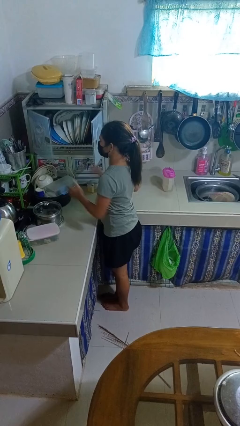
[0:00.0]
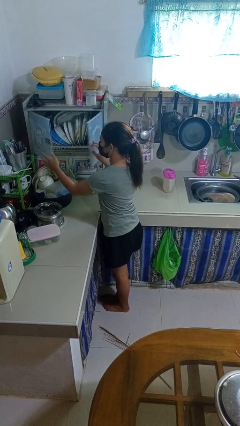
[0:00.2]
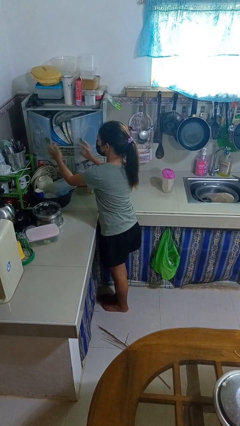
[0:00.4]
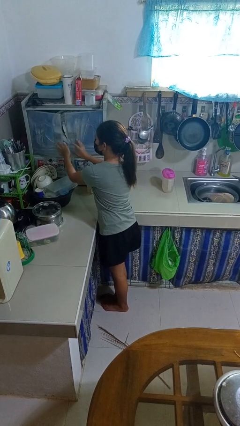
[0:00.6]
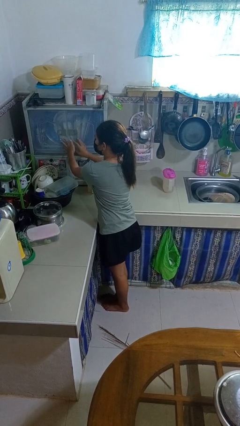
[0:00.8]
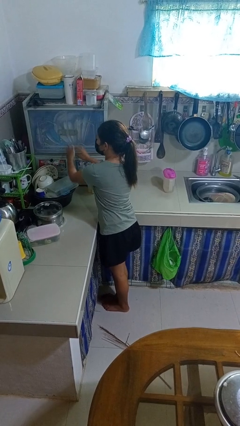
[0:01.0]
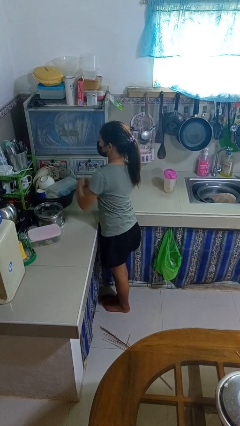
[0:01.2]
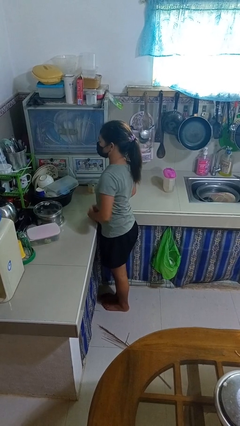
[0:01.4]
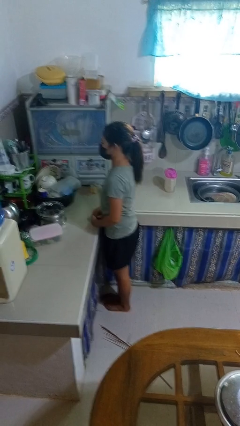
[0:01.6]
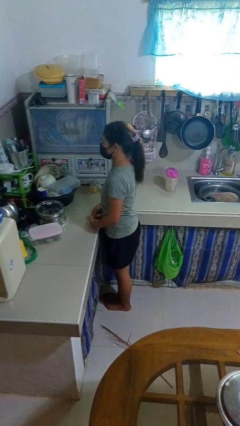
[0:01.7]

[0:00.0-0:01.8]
person closes kitchen drawer

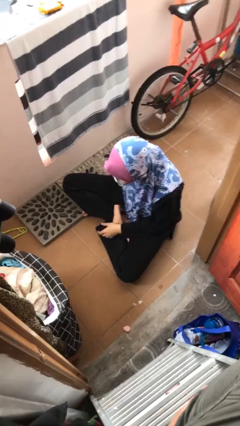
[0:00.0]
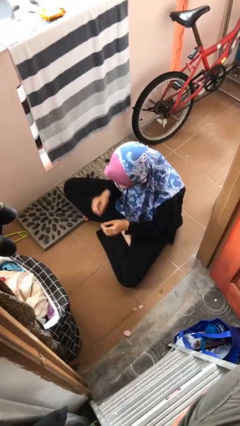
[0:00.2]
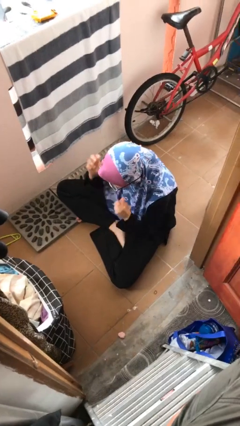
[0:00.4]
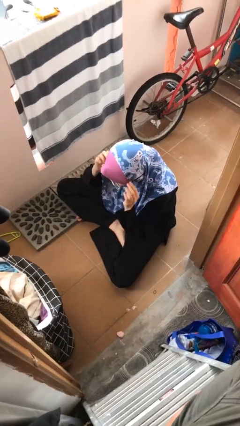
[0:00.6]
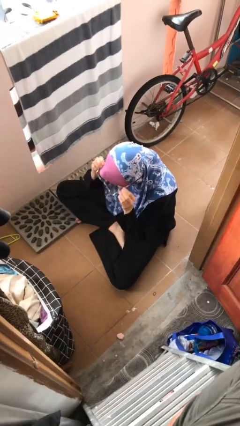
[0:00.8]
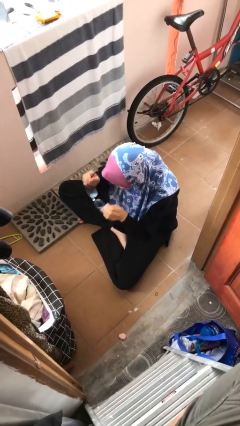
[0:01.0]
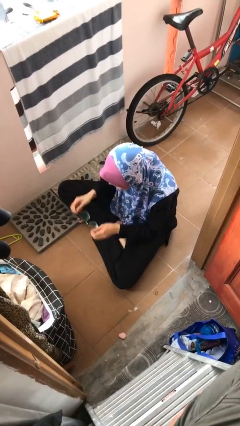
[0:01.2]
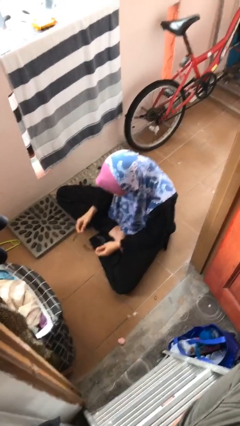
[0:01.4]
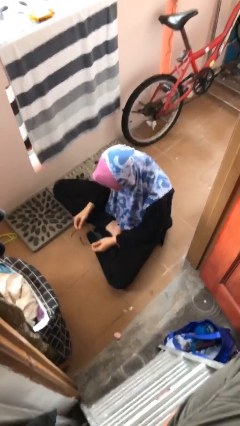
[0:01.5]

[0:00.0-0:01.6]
person takes off glasses

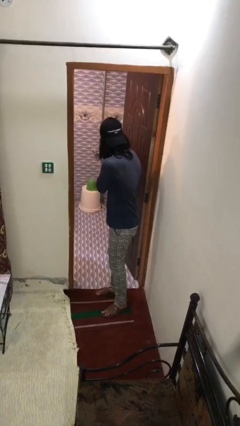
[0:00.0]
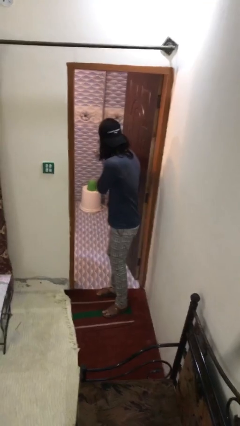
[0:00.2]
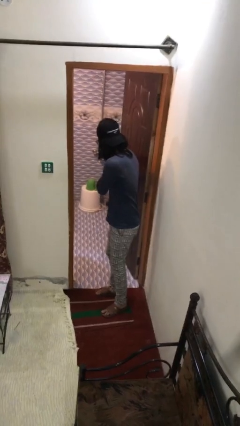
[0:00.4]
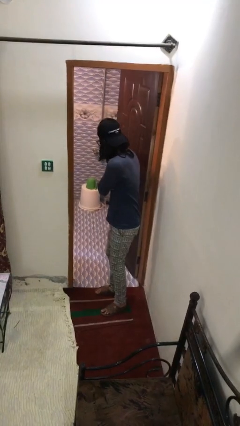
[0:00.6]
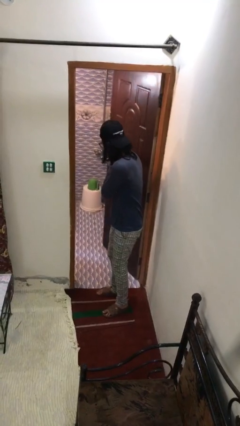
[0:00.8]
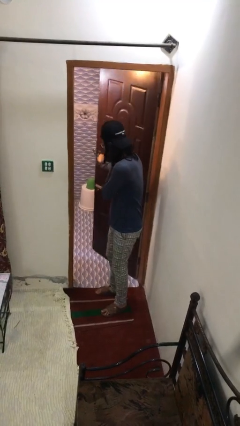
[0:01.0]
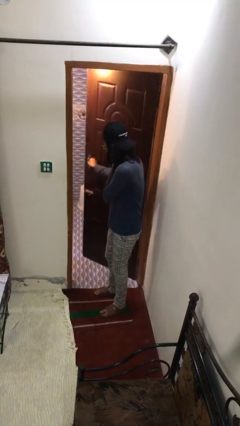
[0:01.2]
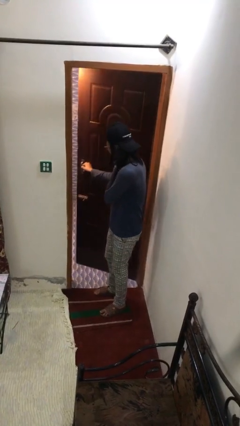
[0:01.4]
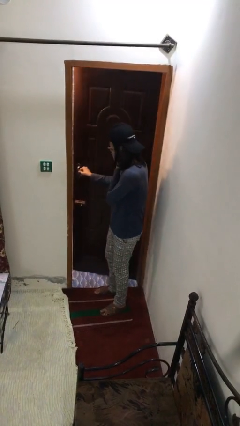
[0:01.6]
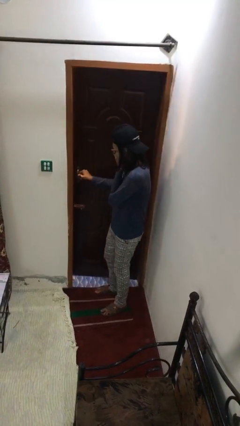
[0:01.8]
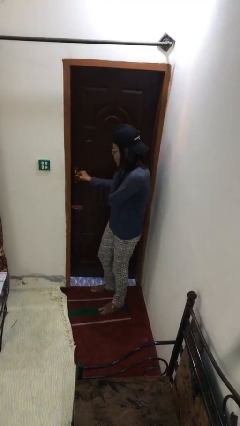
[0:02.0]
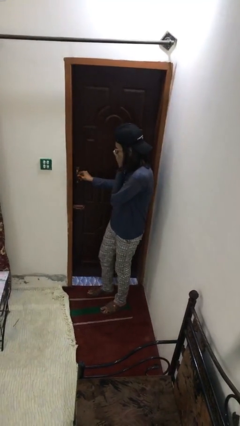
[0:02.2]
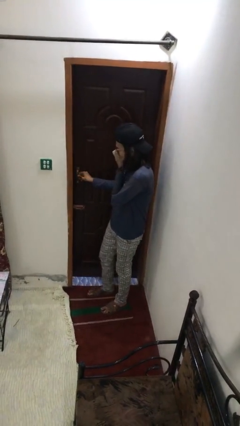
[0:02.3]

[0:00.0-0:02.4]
person closes facility door

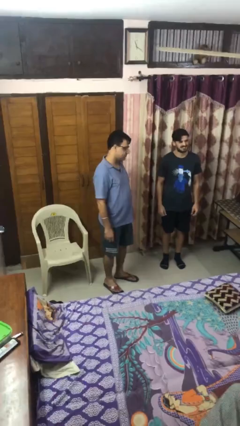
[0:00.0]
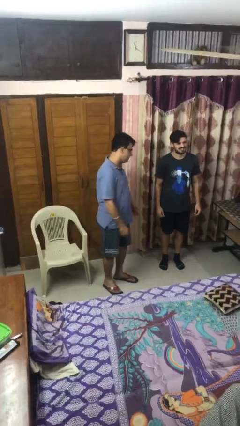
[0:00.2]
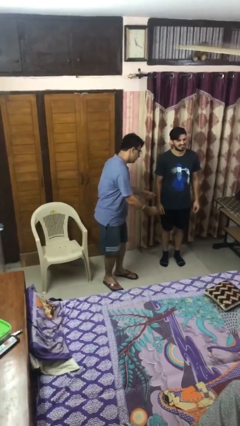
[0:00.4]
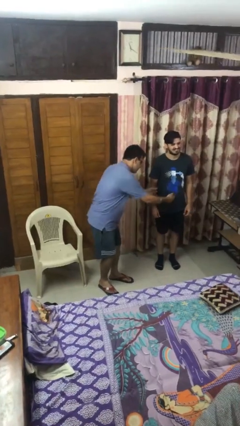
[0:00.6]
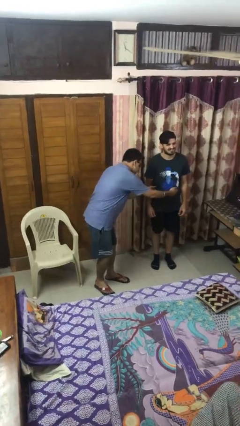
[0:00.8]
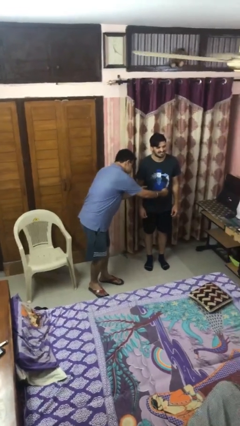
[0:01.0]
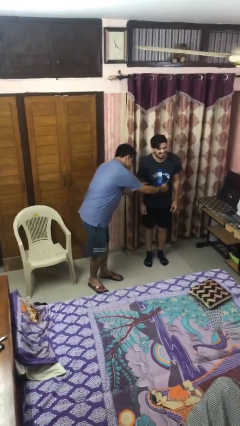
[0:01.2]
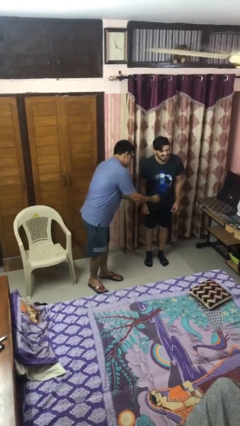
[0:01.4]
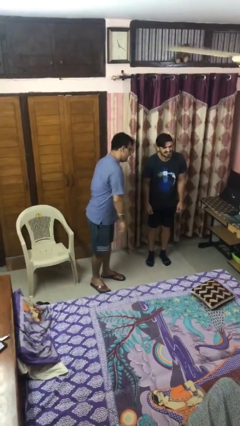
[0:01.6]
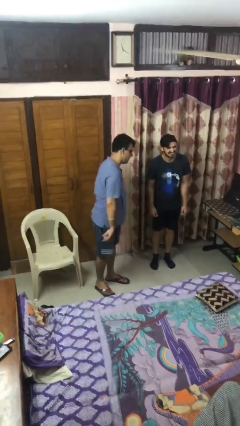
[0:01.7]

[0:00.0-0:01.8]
person tickles person

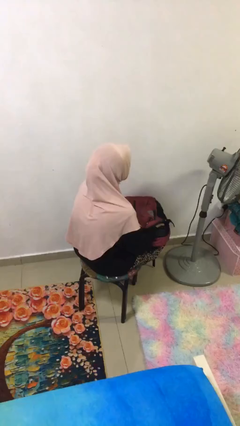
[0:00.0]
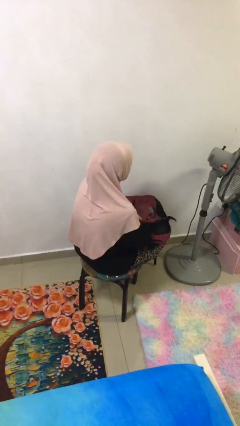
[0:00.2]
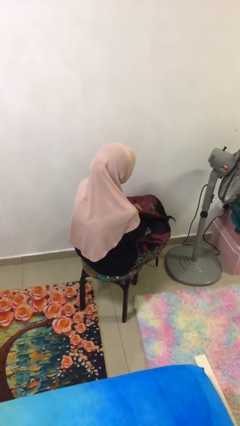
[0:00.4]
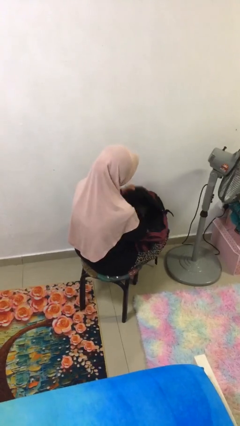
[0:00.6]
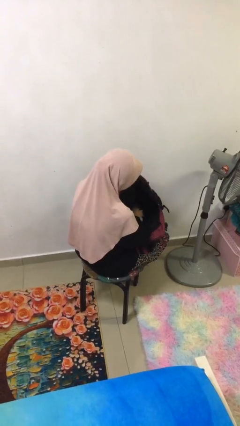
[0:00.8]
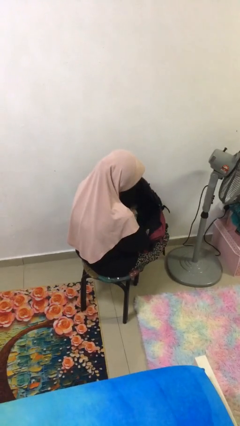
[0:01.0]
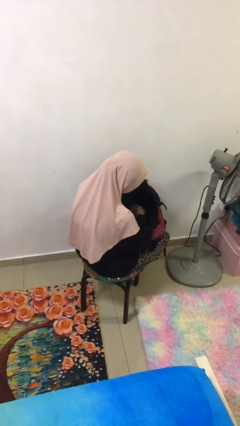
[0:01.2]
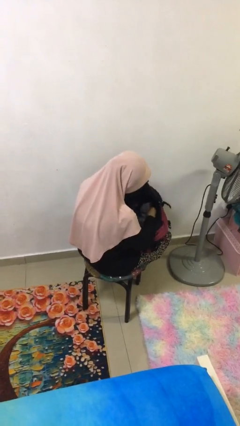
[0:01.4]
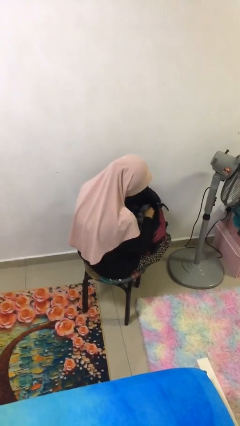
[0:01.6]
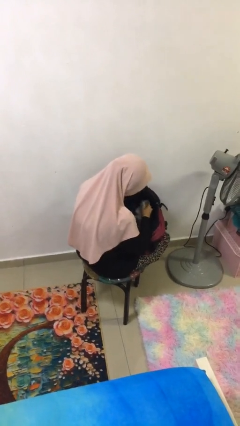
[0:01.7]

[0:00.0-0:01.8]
person searches in backpack

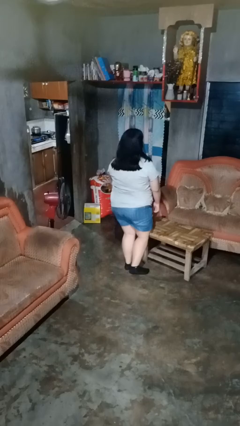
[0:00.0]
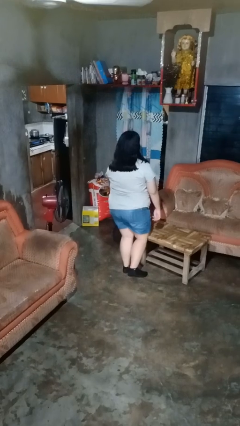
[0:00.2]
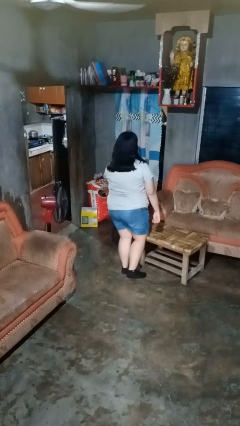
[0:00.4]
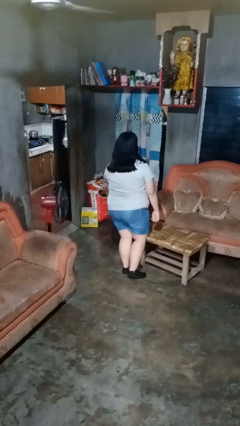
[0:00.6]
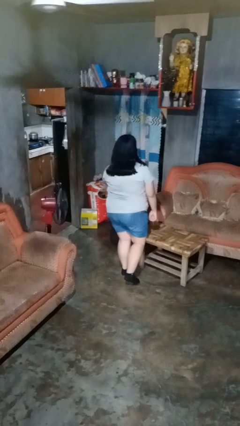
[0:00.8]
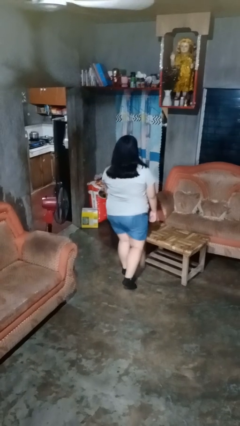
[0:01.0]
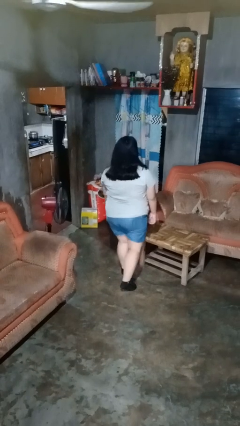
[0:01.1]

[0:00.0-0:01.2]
person bumps into table

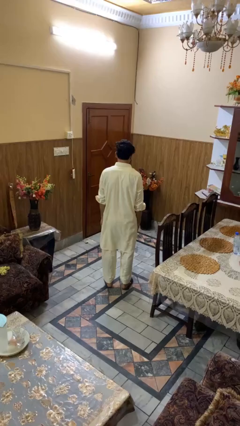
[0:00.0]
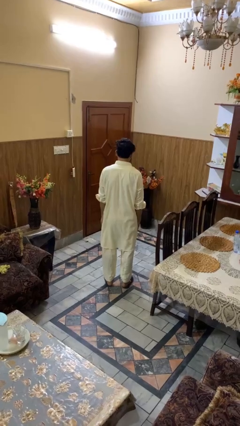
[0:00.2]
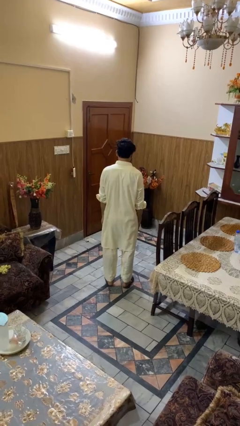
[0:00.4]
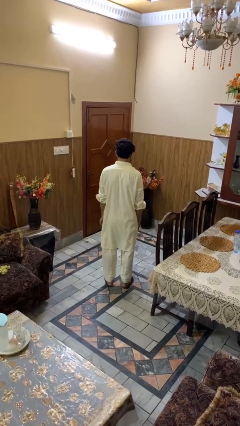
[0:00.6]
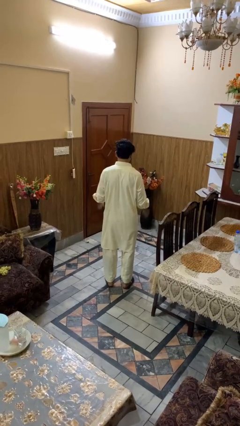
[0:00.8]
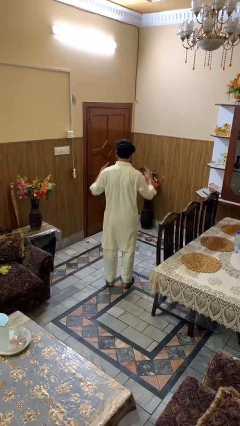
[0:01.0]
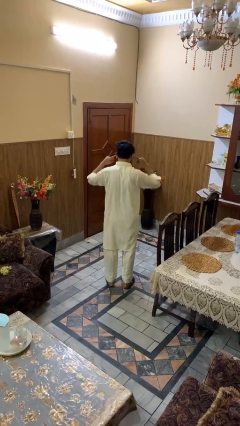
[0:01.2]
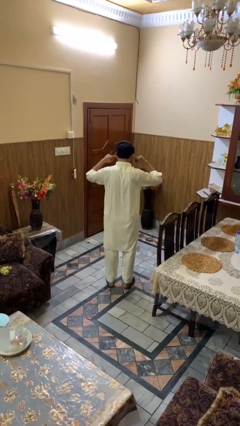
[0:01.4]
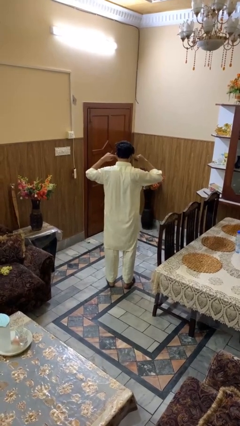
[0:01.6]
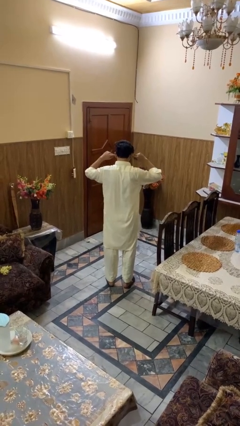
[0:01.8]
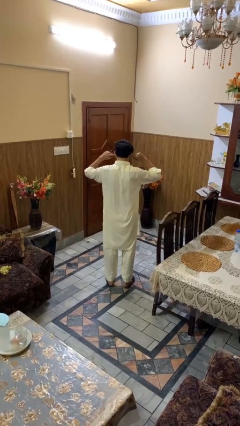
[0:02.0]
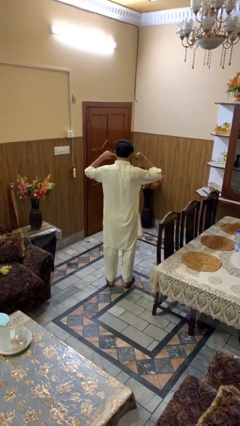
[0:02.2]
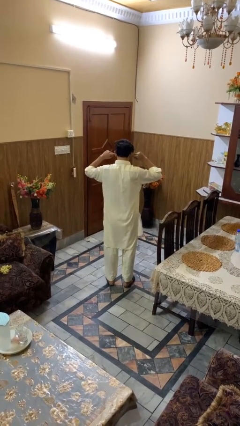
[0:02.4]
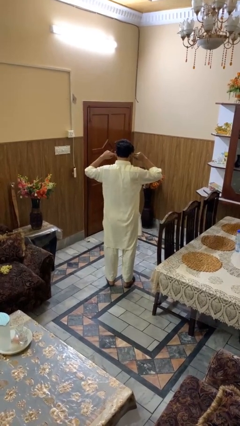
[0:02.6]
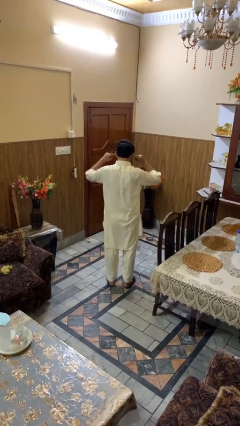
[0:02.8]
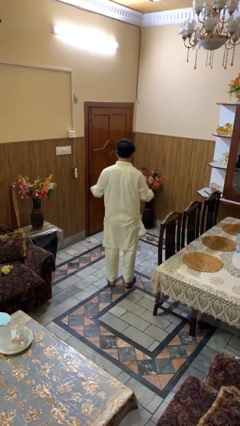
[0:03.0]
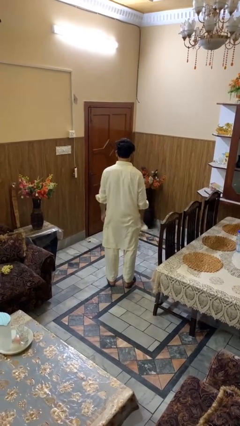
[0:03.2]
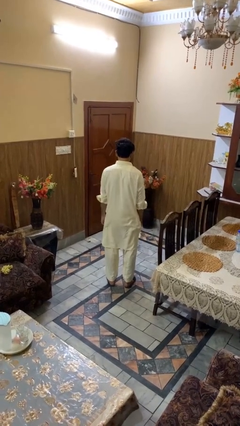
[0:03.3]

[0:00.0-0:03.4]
person puts fingers in ear

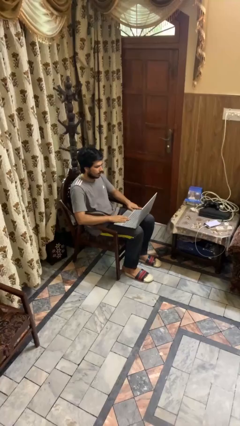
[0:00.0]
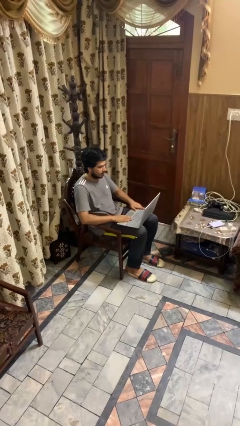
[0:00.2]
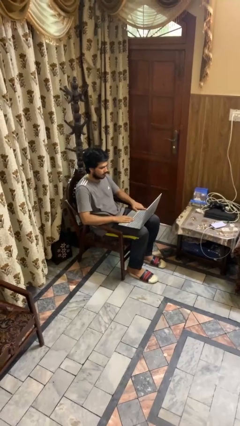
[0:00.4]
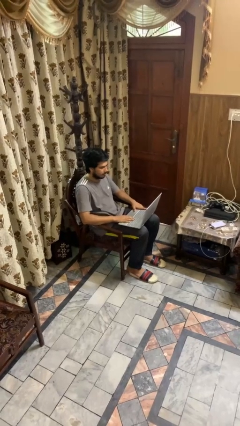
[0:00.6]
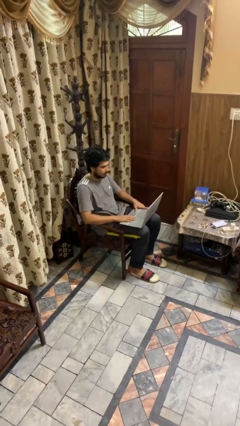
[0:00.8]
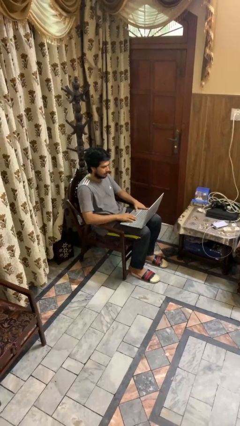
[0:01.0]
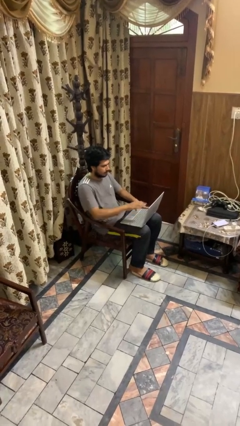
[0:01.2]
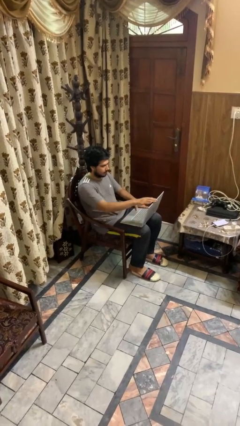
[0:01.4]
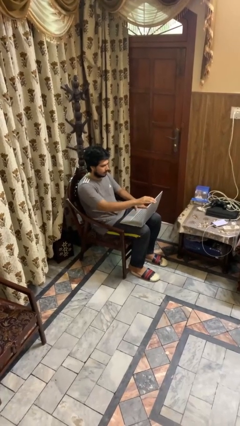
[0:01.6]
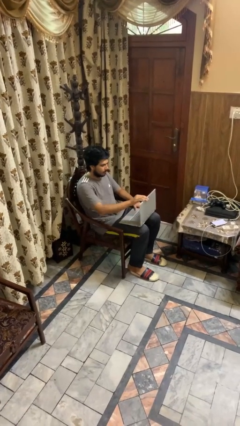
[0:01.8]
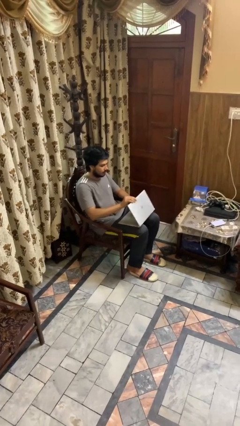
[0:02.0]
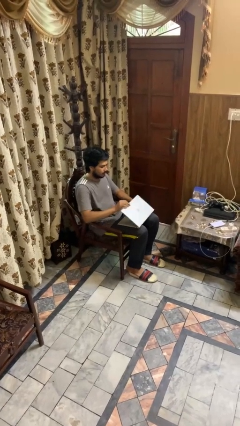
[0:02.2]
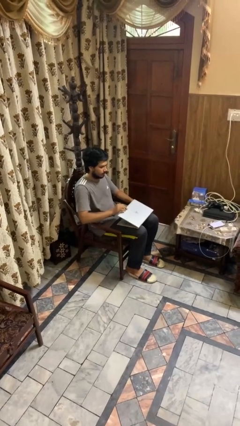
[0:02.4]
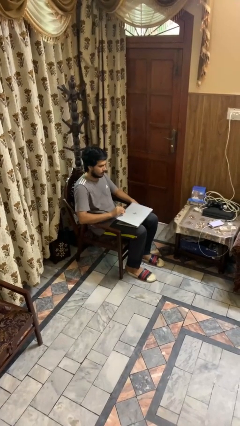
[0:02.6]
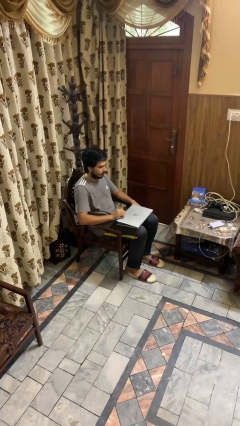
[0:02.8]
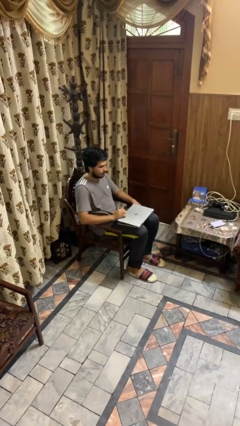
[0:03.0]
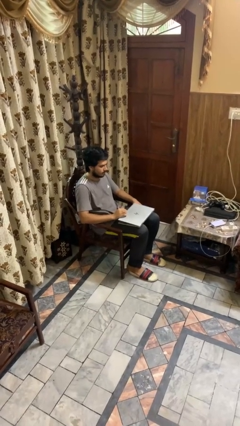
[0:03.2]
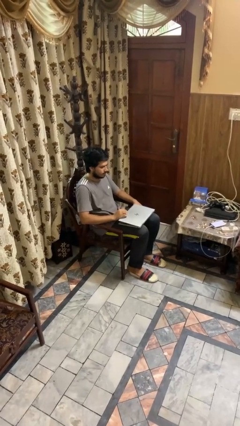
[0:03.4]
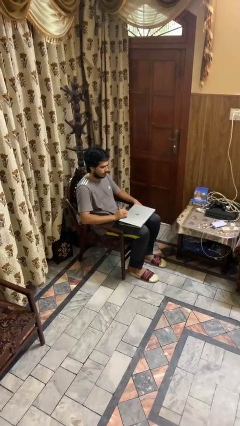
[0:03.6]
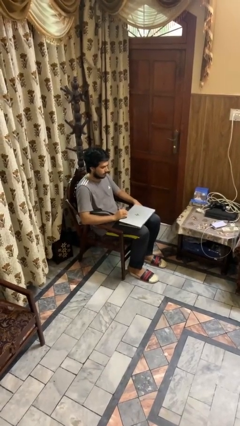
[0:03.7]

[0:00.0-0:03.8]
person closes laptop
